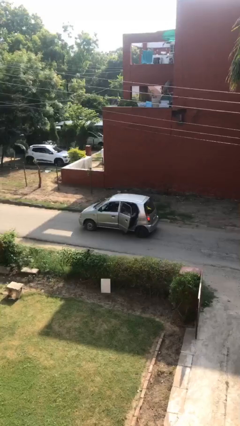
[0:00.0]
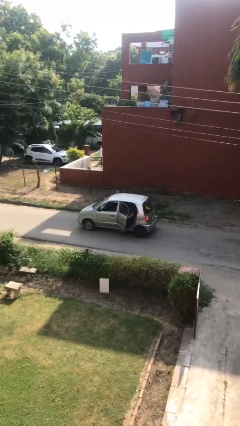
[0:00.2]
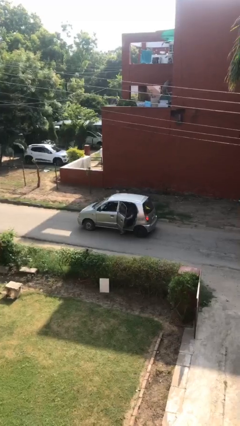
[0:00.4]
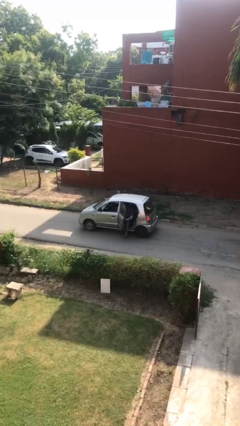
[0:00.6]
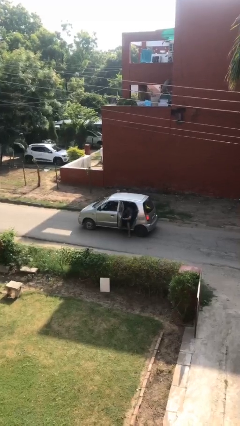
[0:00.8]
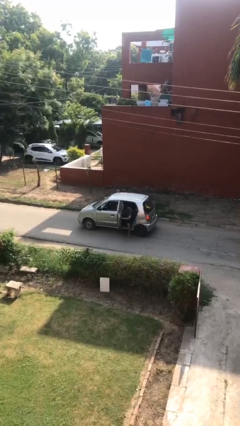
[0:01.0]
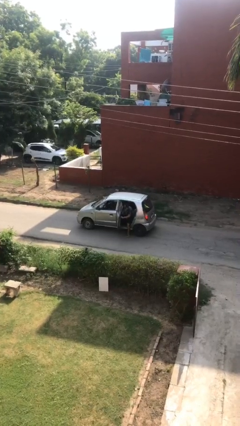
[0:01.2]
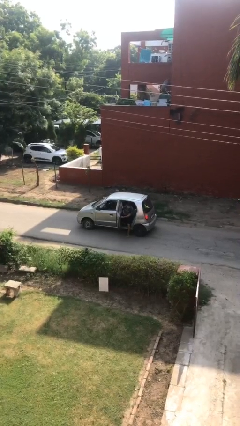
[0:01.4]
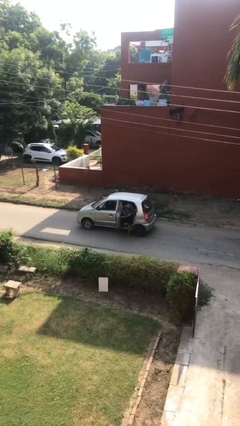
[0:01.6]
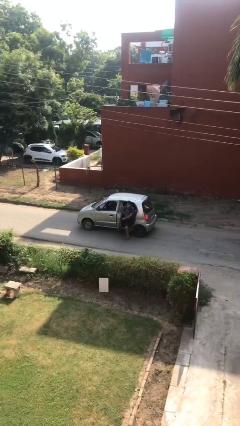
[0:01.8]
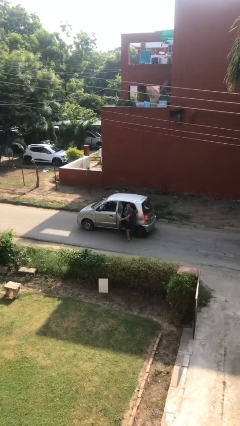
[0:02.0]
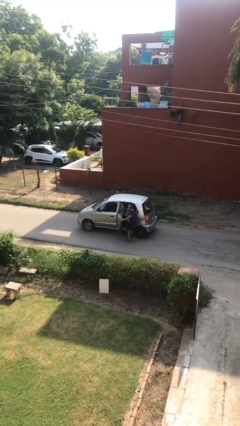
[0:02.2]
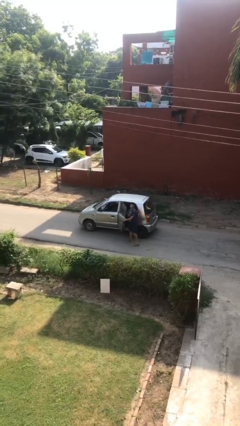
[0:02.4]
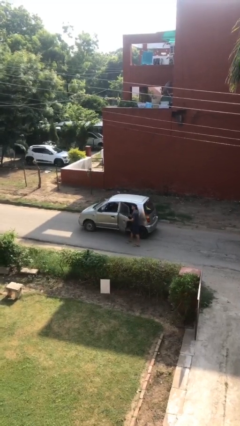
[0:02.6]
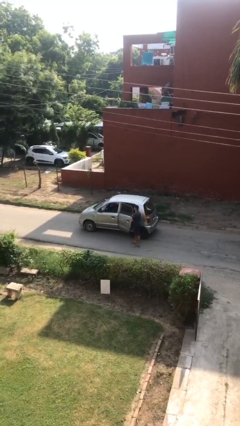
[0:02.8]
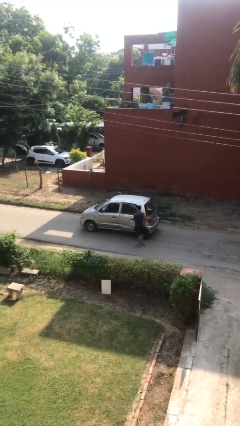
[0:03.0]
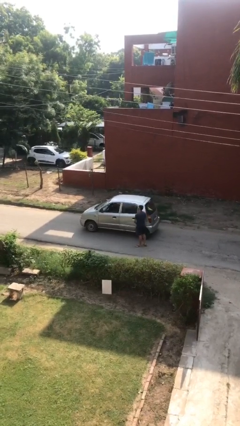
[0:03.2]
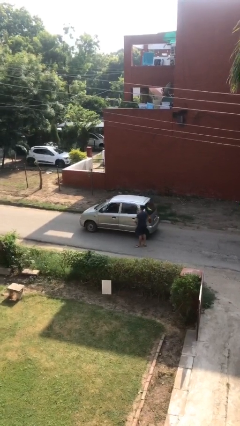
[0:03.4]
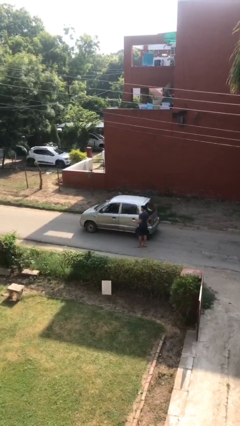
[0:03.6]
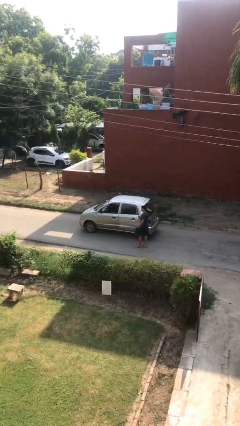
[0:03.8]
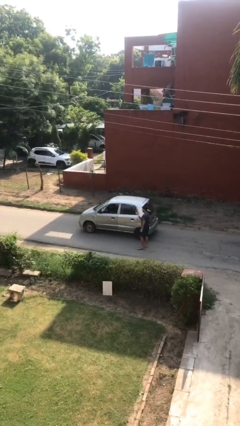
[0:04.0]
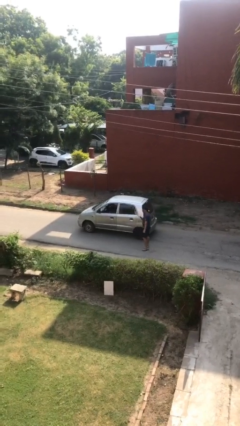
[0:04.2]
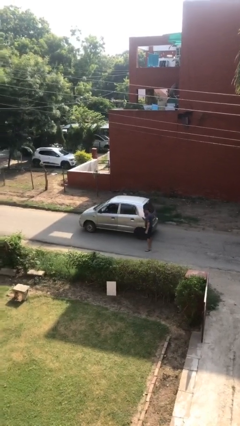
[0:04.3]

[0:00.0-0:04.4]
car drops off person

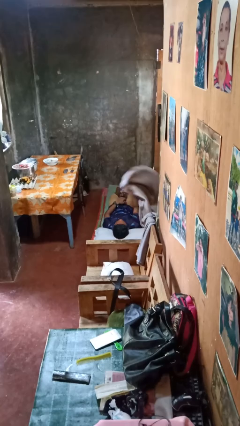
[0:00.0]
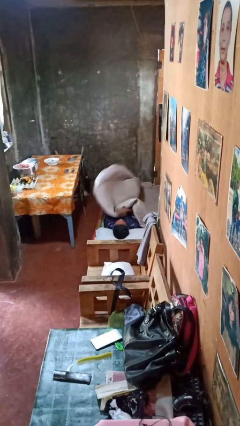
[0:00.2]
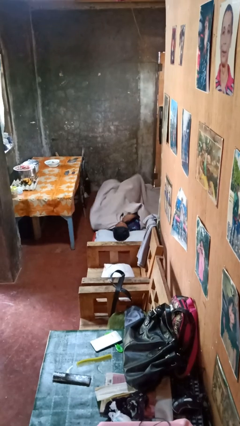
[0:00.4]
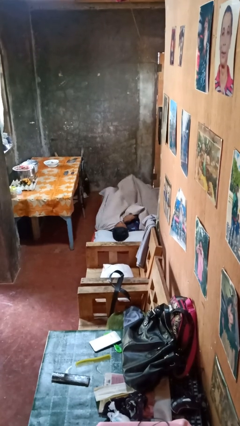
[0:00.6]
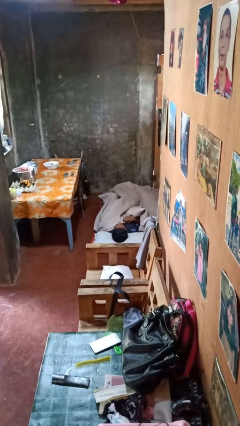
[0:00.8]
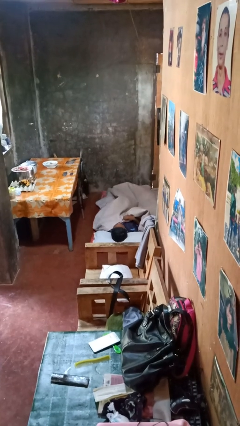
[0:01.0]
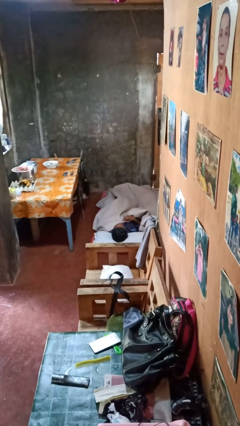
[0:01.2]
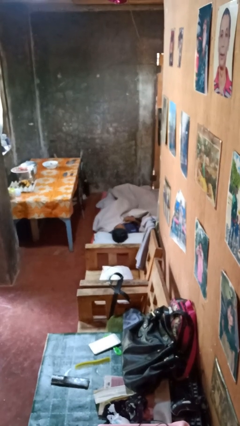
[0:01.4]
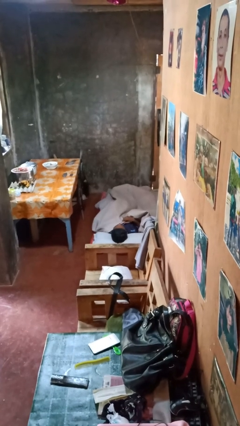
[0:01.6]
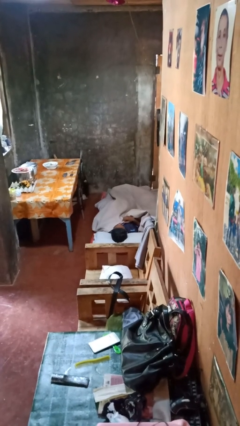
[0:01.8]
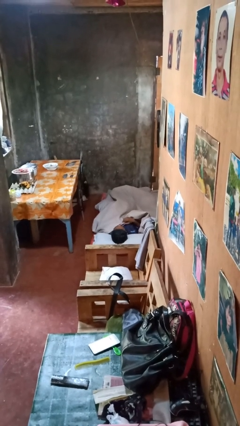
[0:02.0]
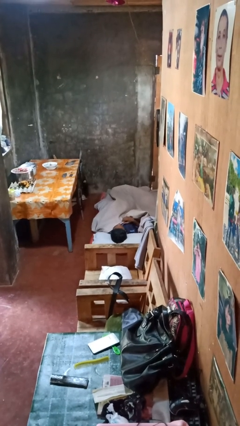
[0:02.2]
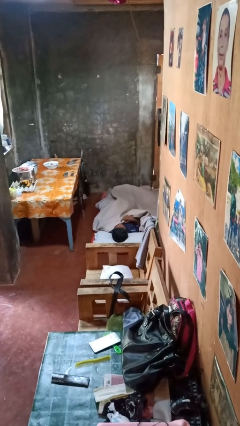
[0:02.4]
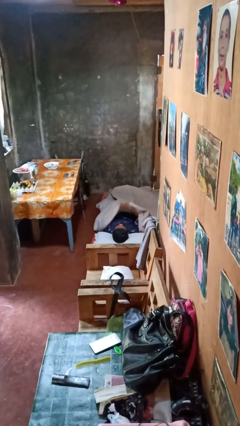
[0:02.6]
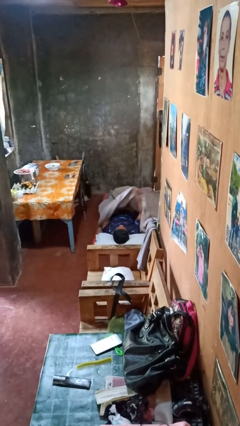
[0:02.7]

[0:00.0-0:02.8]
person covers with bedsheets

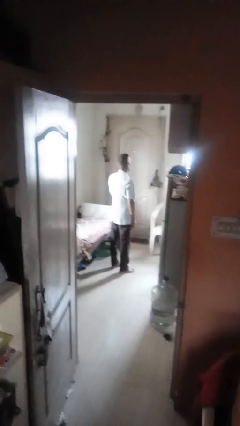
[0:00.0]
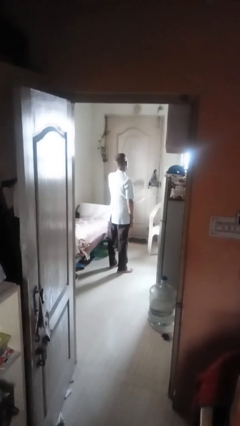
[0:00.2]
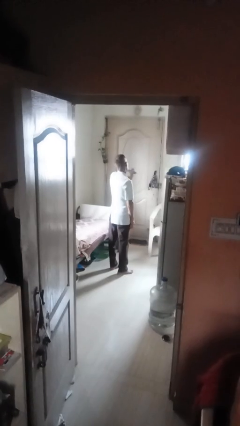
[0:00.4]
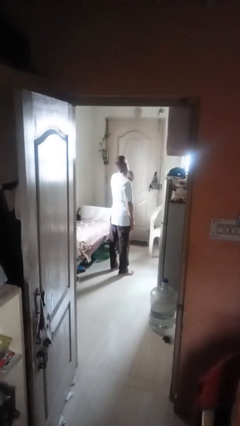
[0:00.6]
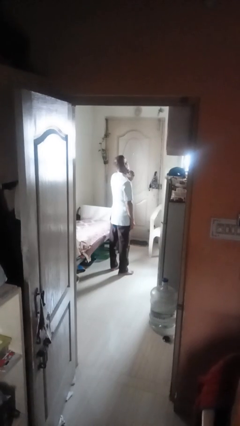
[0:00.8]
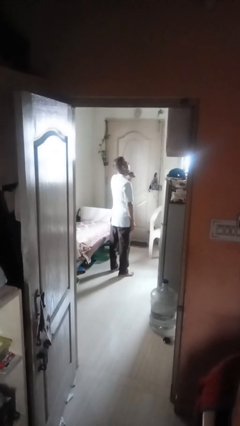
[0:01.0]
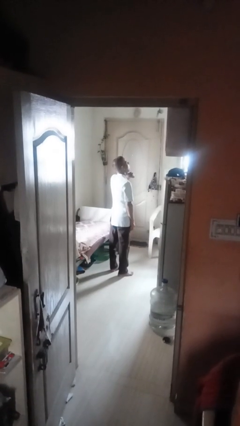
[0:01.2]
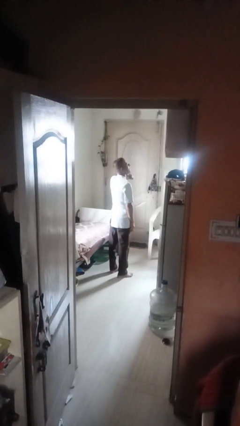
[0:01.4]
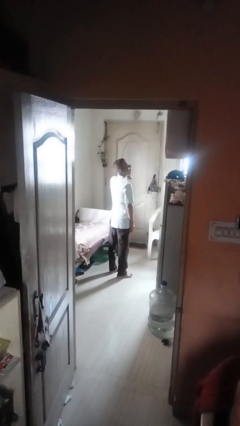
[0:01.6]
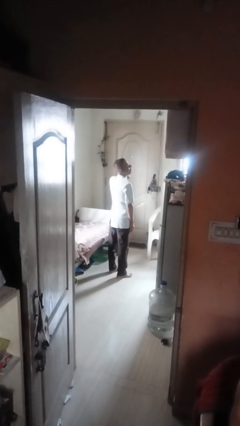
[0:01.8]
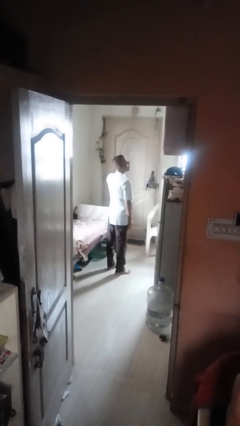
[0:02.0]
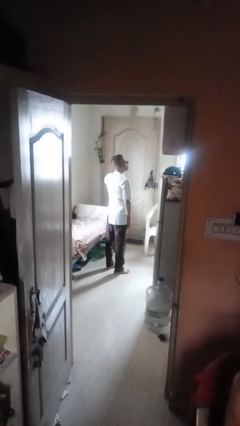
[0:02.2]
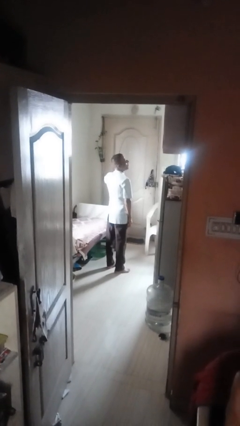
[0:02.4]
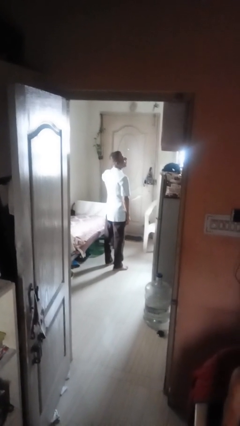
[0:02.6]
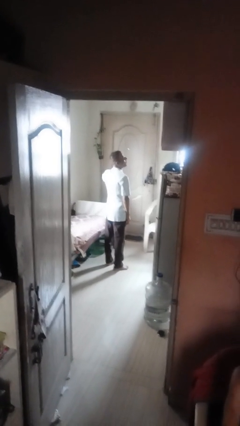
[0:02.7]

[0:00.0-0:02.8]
person gestures cut

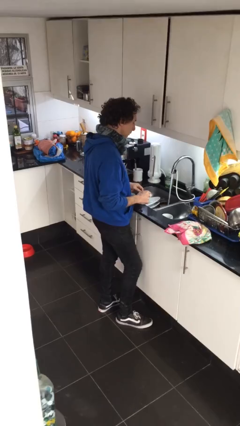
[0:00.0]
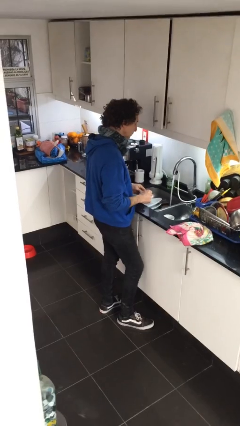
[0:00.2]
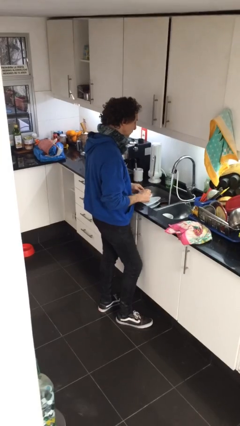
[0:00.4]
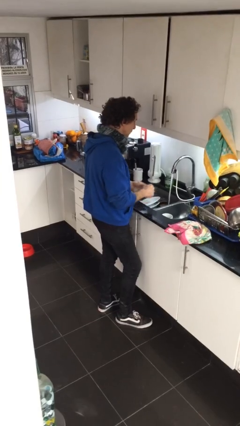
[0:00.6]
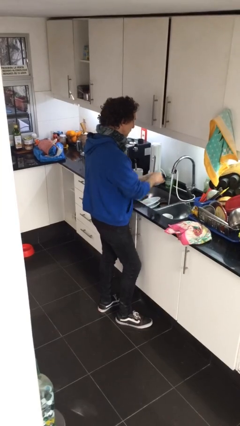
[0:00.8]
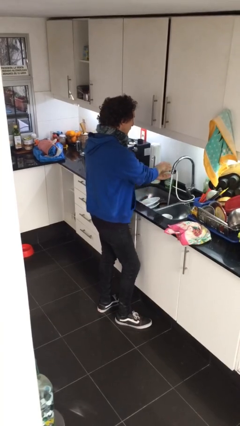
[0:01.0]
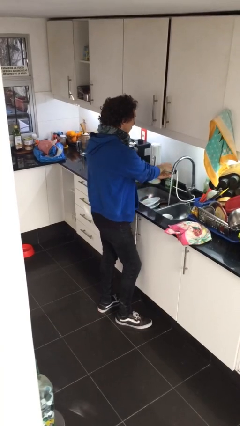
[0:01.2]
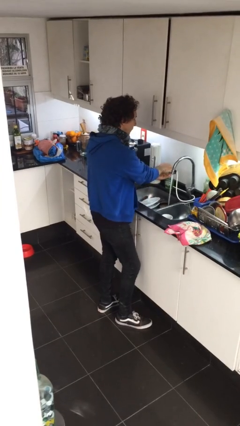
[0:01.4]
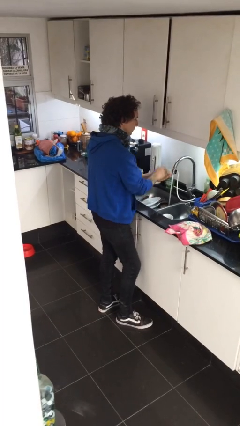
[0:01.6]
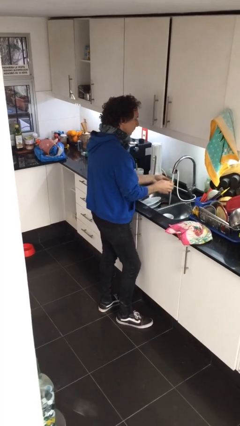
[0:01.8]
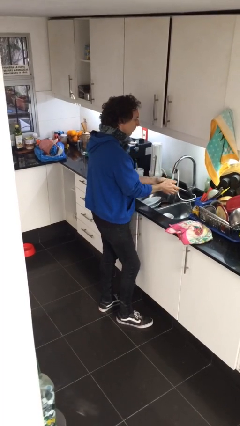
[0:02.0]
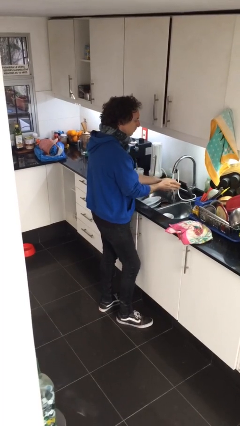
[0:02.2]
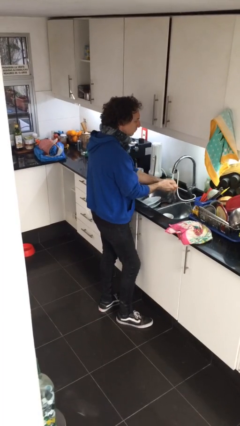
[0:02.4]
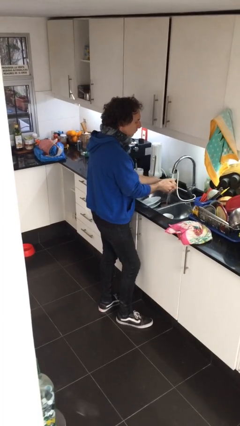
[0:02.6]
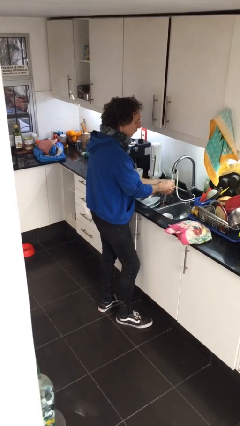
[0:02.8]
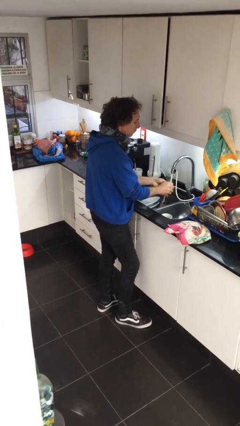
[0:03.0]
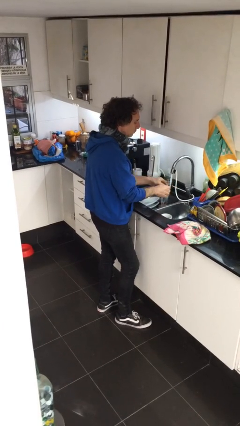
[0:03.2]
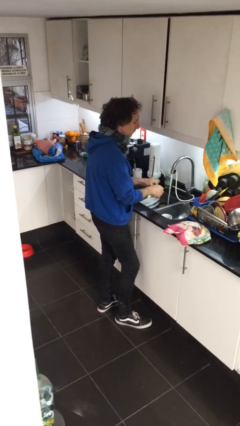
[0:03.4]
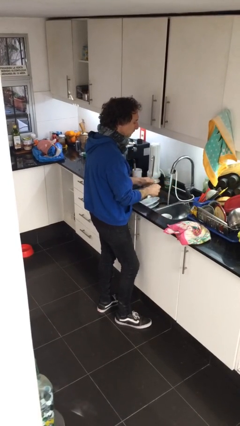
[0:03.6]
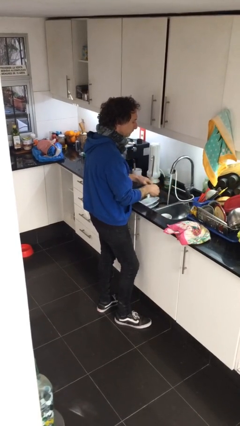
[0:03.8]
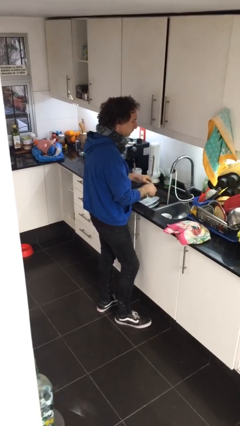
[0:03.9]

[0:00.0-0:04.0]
person washes hands

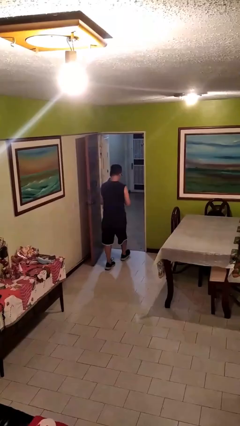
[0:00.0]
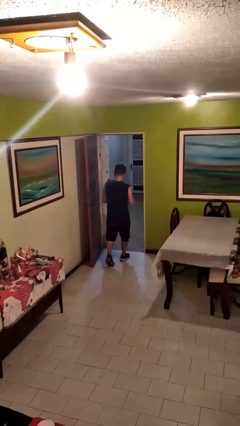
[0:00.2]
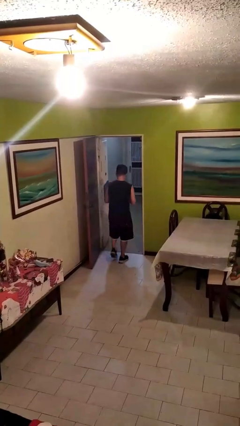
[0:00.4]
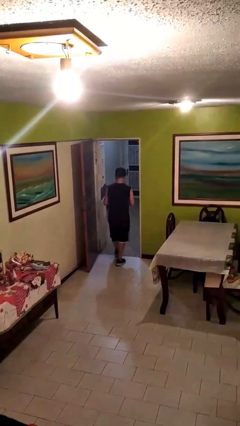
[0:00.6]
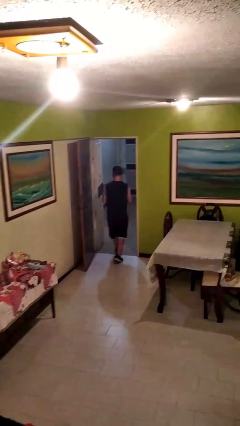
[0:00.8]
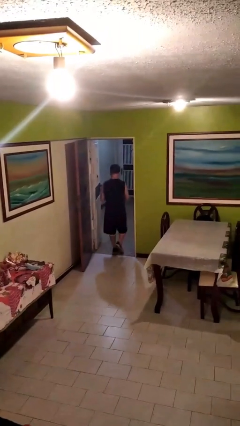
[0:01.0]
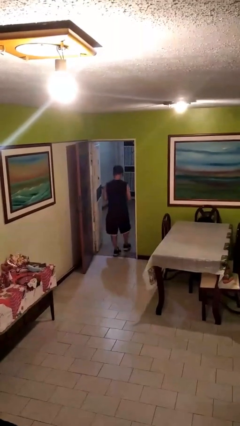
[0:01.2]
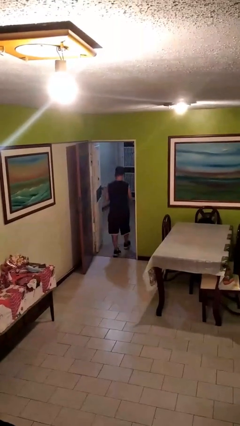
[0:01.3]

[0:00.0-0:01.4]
person exits scene through structure

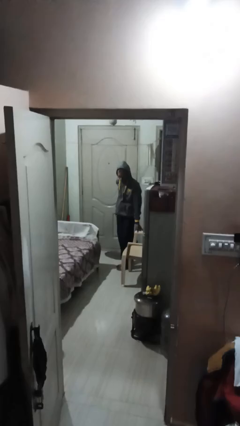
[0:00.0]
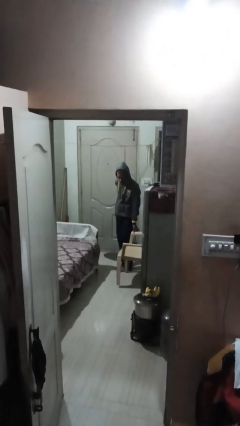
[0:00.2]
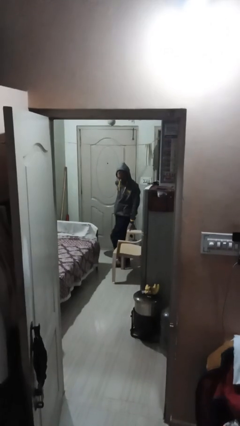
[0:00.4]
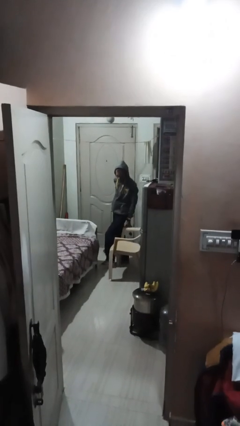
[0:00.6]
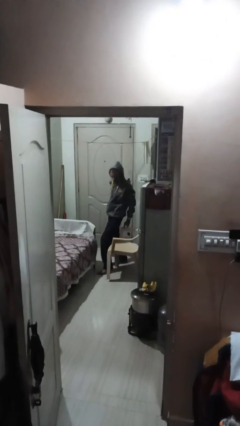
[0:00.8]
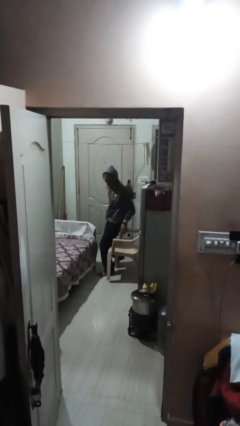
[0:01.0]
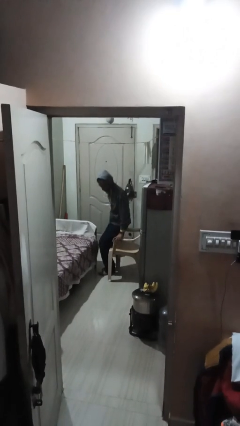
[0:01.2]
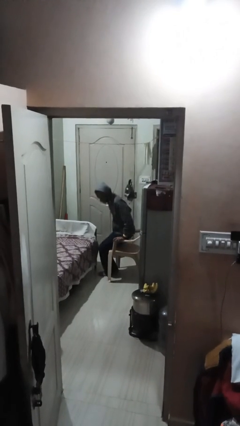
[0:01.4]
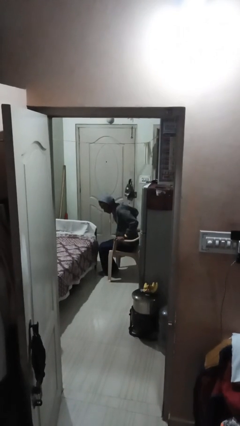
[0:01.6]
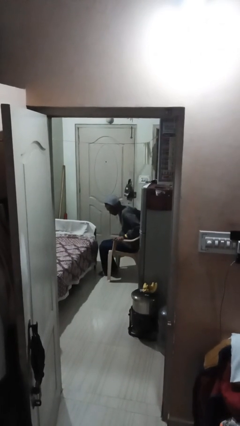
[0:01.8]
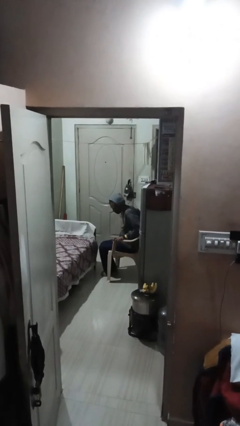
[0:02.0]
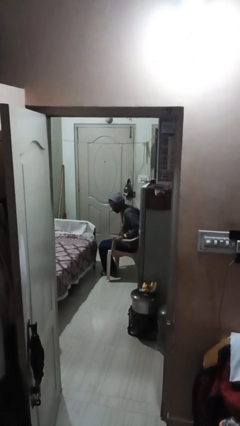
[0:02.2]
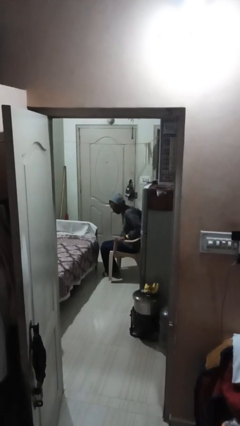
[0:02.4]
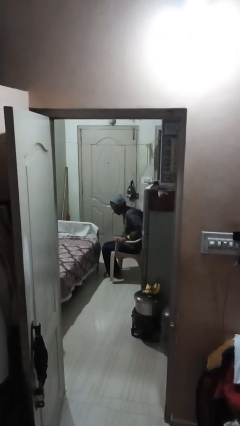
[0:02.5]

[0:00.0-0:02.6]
person sits down
